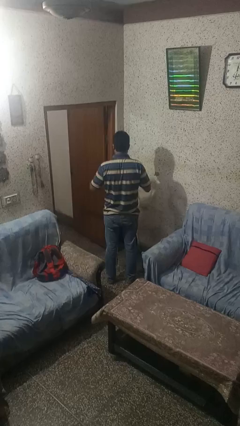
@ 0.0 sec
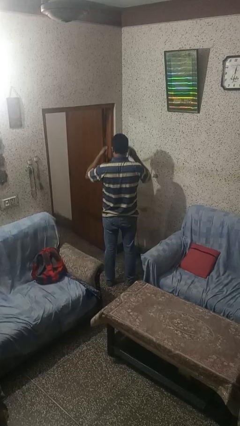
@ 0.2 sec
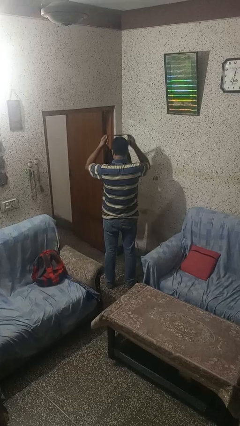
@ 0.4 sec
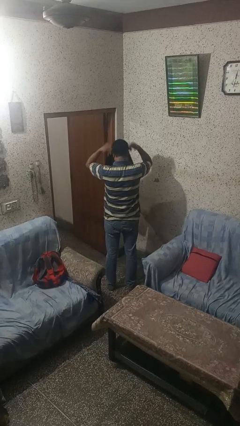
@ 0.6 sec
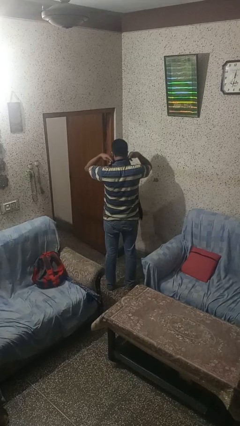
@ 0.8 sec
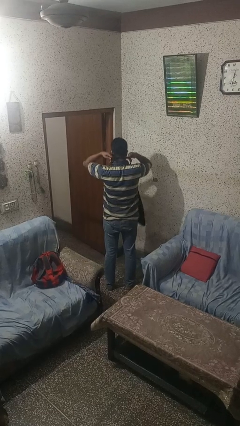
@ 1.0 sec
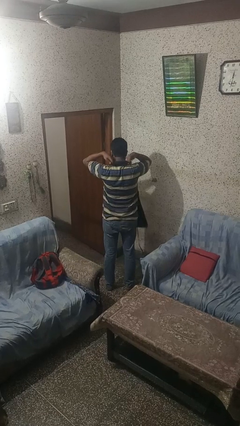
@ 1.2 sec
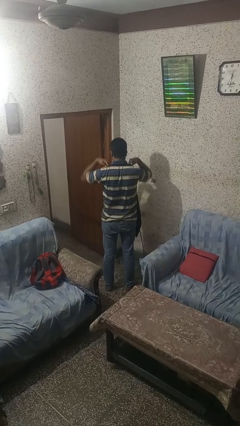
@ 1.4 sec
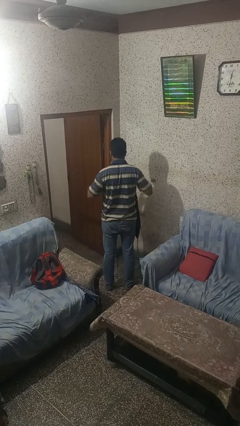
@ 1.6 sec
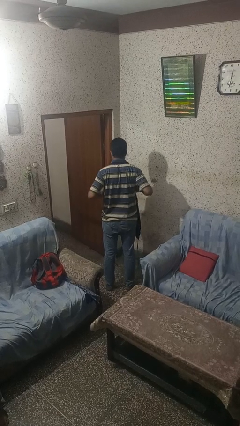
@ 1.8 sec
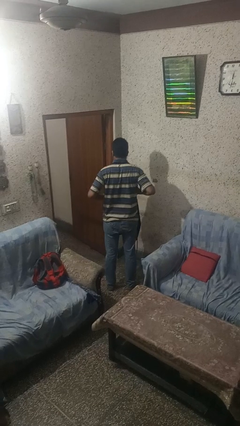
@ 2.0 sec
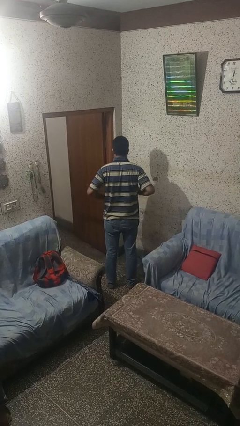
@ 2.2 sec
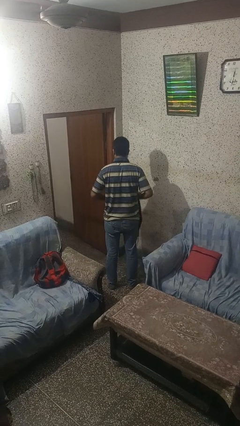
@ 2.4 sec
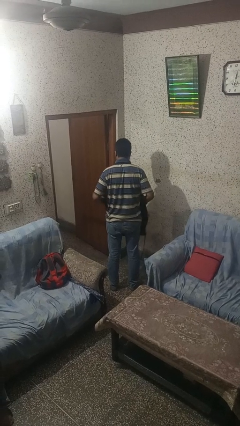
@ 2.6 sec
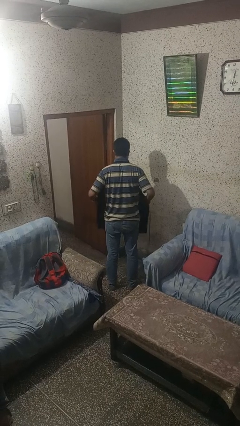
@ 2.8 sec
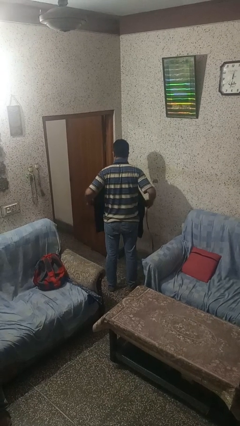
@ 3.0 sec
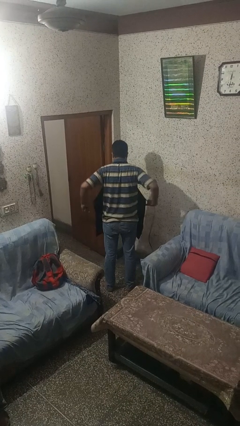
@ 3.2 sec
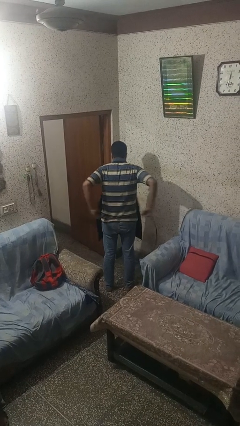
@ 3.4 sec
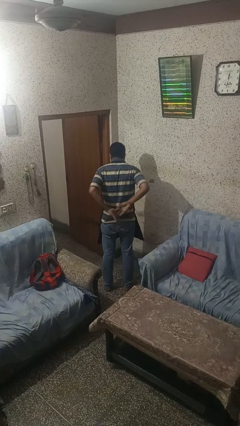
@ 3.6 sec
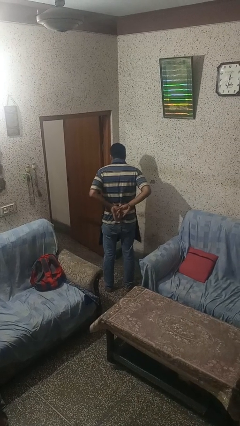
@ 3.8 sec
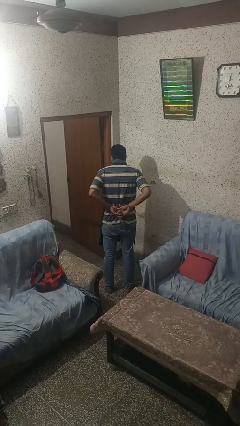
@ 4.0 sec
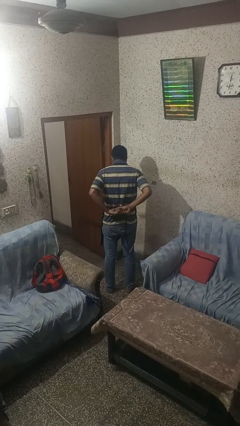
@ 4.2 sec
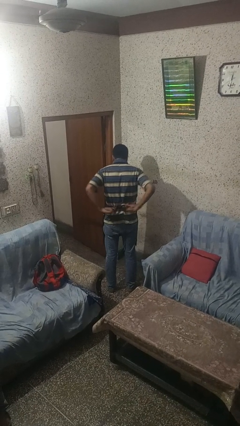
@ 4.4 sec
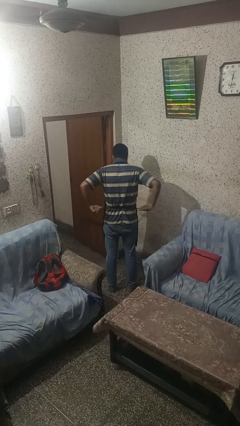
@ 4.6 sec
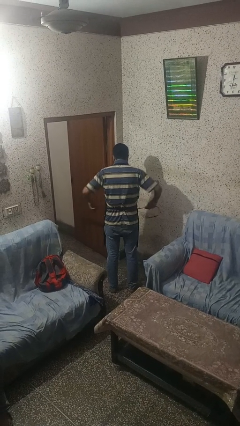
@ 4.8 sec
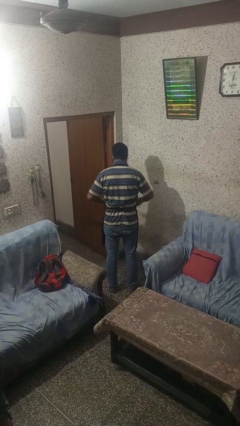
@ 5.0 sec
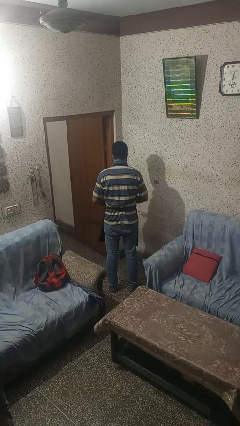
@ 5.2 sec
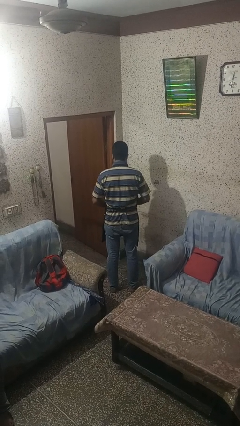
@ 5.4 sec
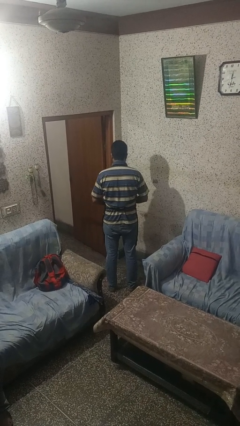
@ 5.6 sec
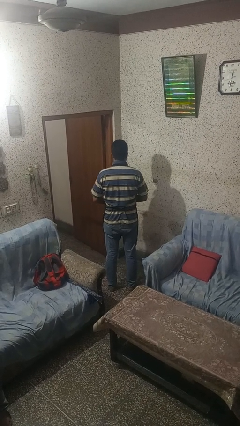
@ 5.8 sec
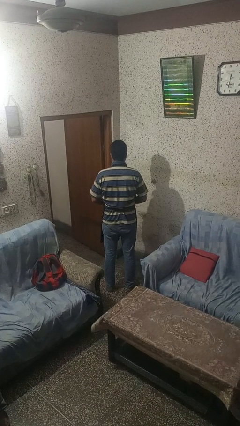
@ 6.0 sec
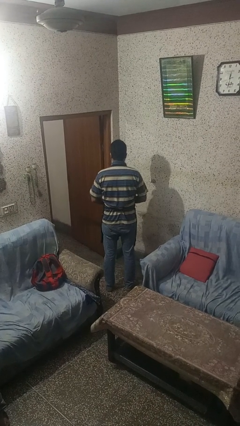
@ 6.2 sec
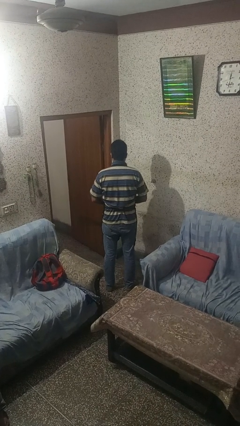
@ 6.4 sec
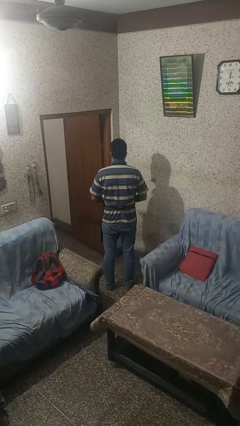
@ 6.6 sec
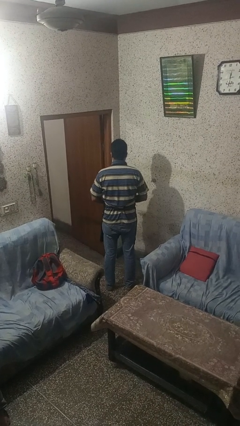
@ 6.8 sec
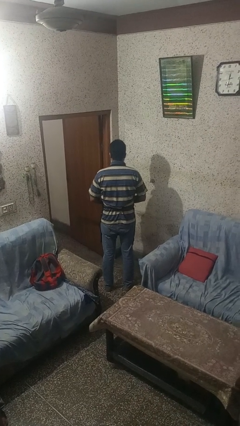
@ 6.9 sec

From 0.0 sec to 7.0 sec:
person puts on apron

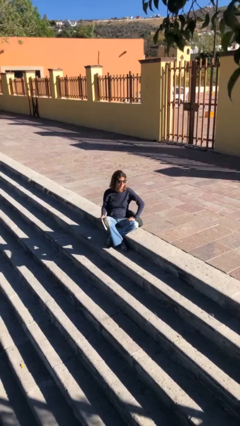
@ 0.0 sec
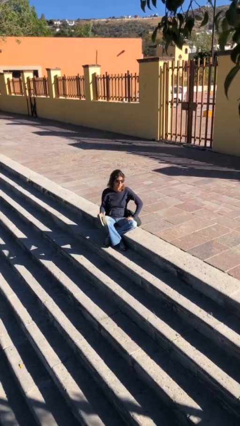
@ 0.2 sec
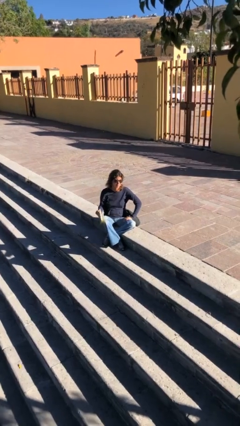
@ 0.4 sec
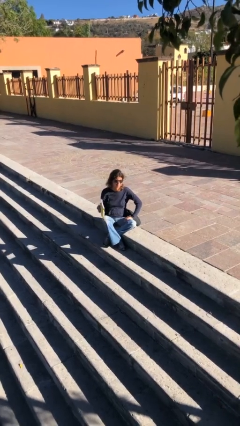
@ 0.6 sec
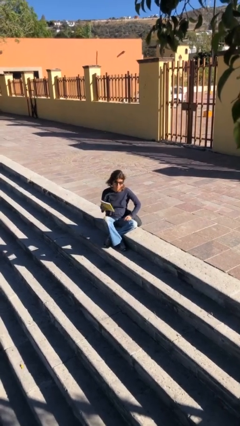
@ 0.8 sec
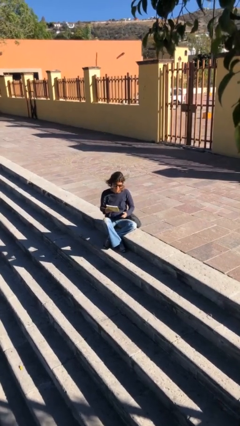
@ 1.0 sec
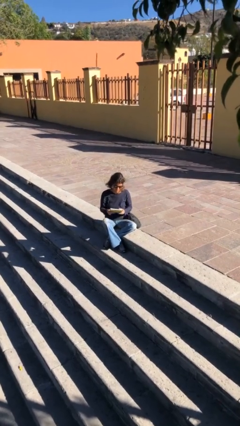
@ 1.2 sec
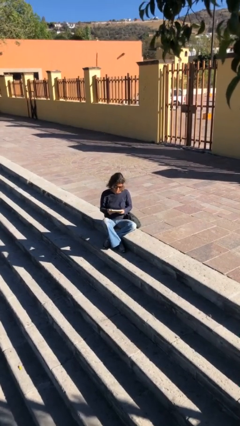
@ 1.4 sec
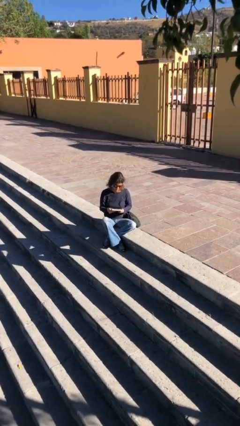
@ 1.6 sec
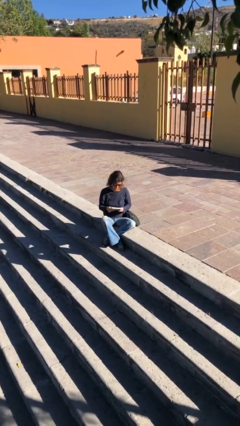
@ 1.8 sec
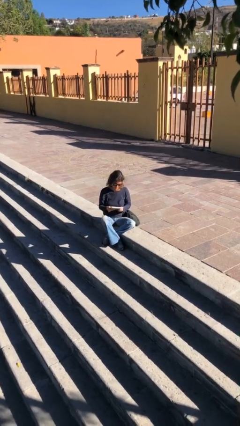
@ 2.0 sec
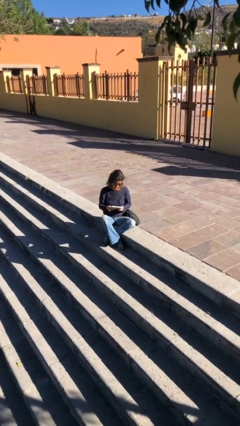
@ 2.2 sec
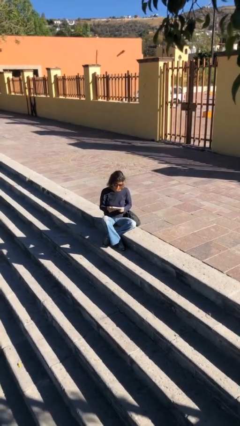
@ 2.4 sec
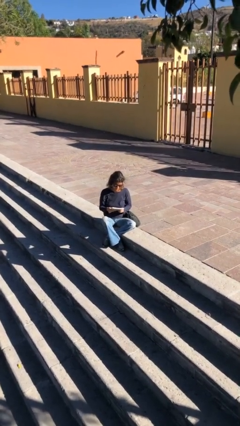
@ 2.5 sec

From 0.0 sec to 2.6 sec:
person reads document

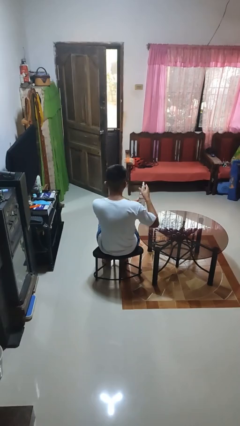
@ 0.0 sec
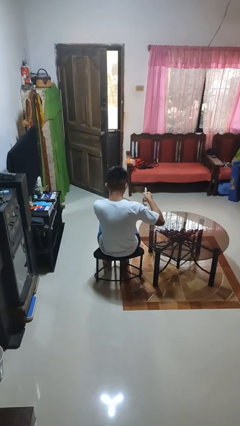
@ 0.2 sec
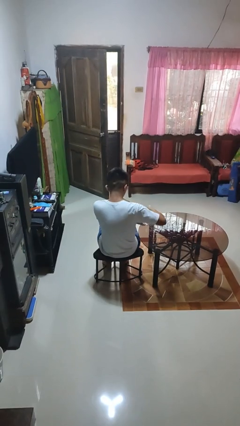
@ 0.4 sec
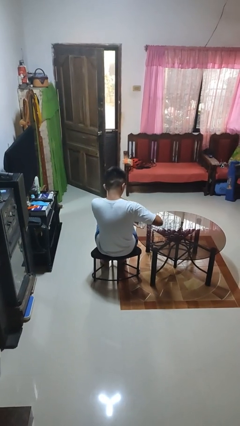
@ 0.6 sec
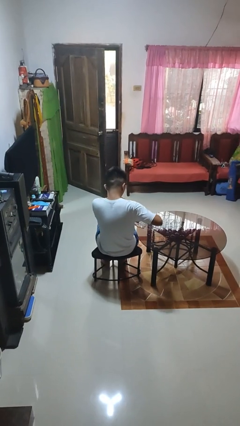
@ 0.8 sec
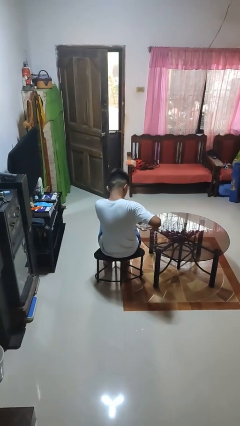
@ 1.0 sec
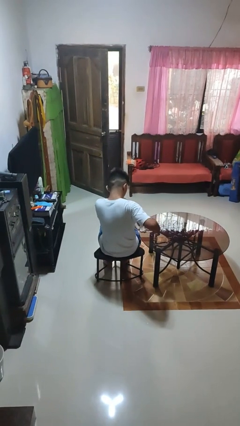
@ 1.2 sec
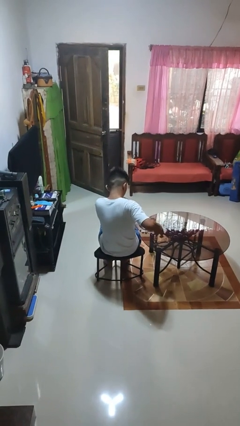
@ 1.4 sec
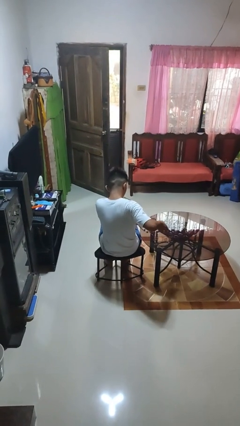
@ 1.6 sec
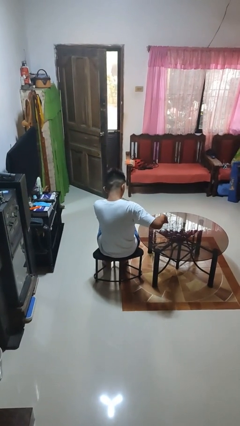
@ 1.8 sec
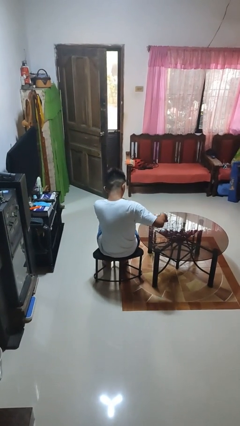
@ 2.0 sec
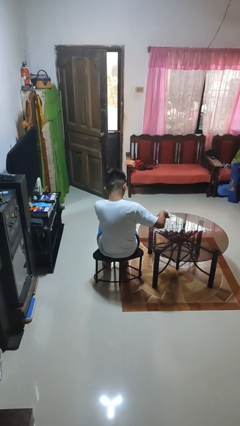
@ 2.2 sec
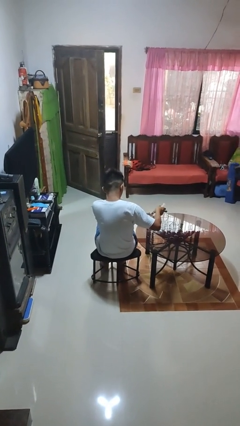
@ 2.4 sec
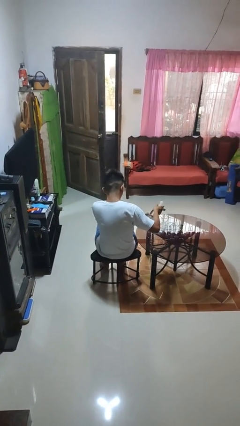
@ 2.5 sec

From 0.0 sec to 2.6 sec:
person sprays from bottle

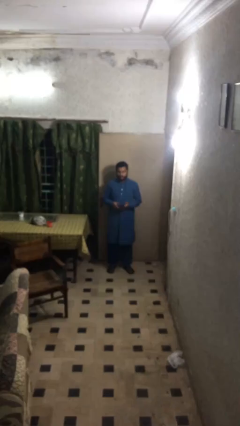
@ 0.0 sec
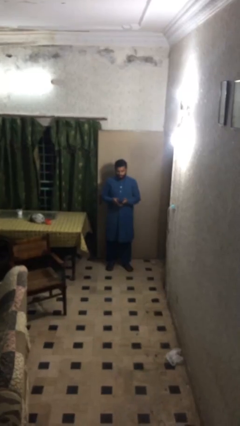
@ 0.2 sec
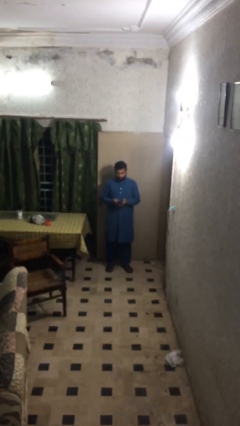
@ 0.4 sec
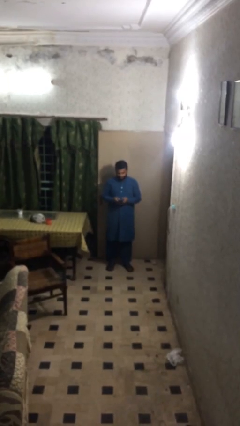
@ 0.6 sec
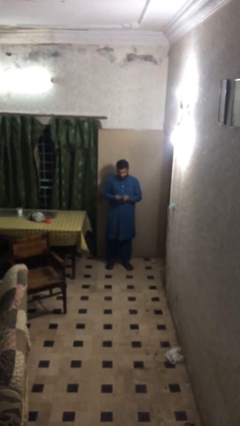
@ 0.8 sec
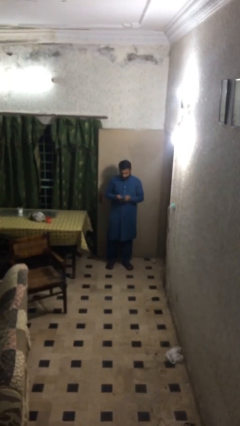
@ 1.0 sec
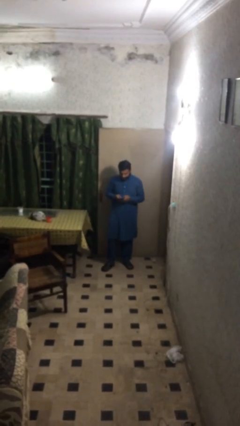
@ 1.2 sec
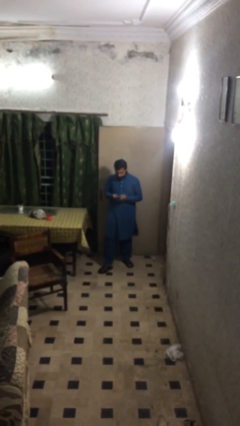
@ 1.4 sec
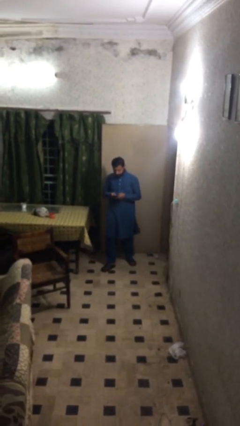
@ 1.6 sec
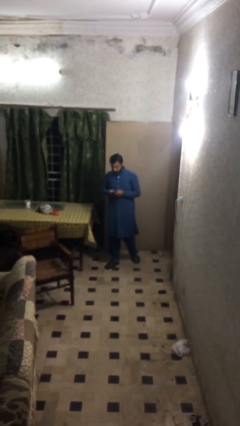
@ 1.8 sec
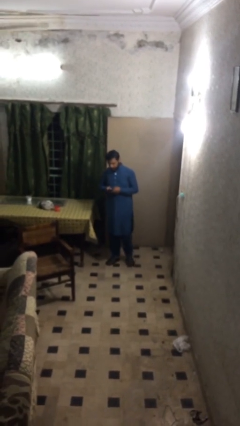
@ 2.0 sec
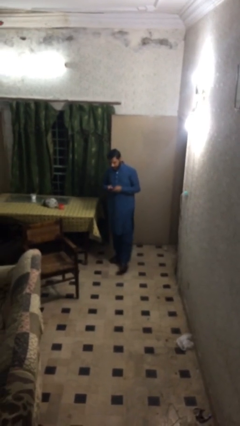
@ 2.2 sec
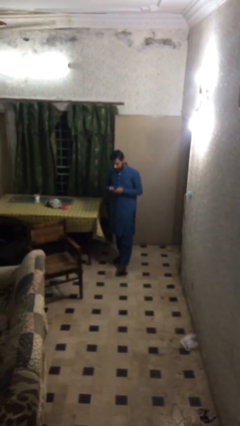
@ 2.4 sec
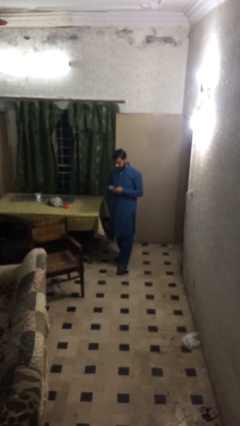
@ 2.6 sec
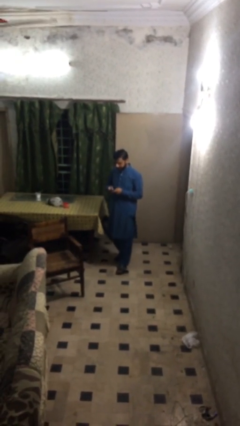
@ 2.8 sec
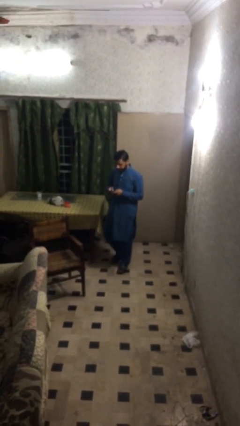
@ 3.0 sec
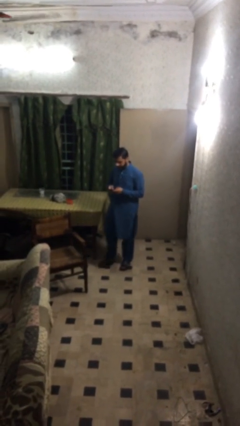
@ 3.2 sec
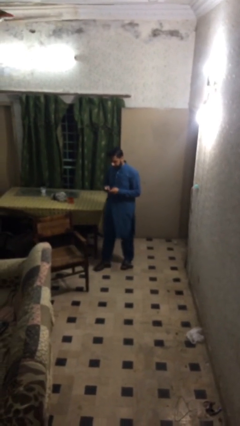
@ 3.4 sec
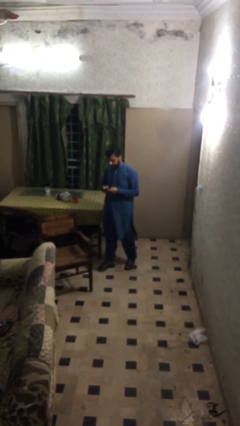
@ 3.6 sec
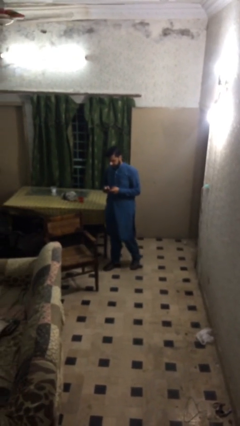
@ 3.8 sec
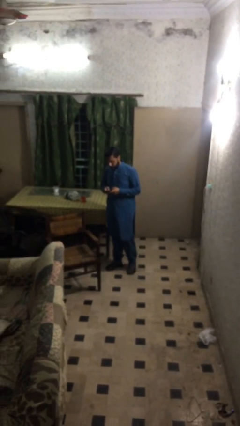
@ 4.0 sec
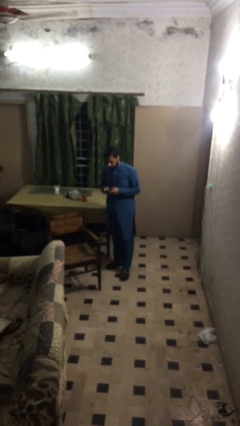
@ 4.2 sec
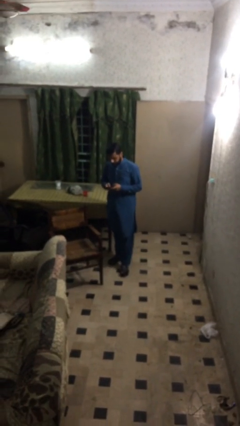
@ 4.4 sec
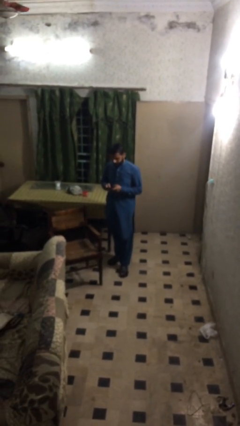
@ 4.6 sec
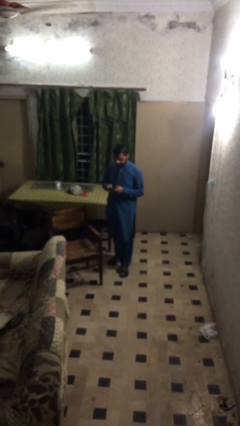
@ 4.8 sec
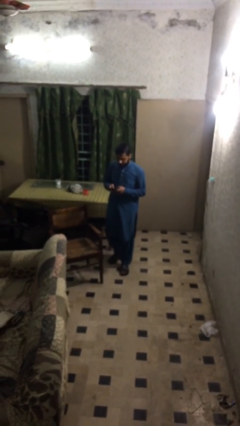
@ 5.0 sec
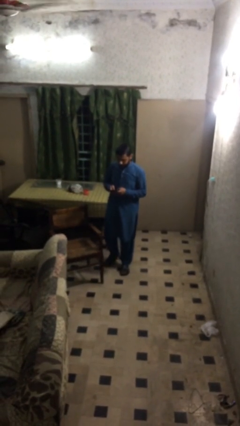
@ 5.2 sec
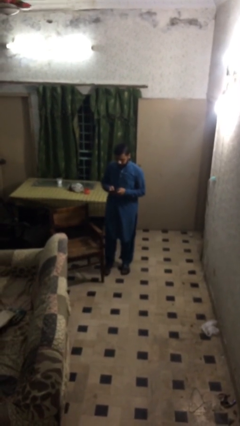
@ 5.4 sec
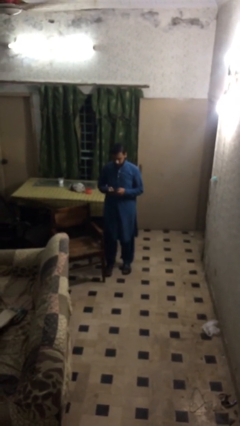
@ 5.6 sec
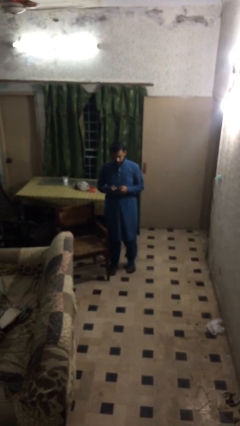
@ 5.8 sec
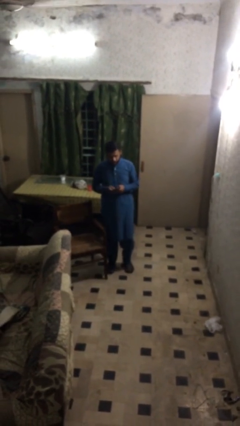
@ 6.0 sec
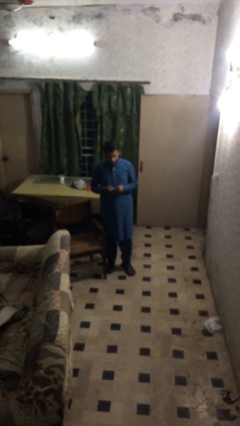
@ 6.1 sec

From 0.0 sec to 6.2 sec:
person texts on phone
